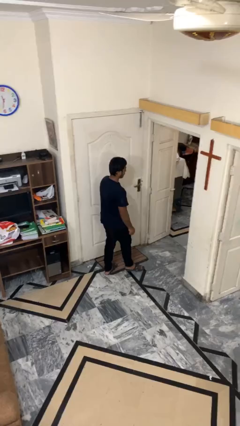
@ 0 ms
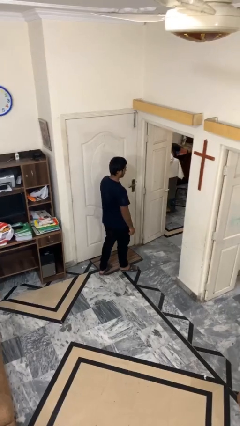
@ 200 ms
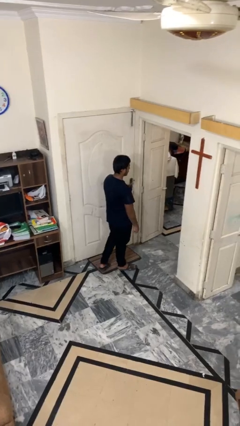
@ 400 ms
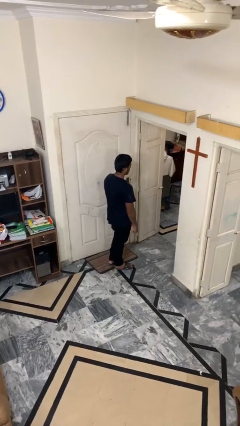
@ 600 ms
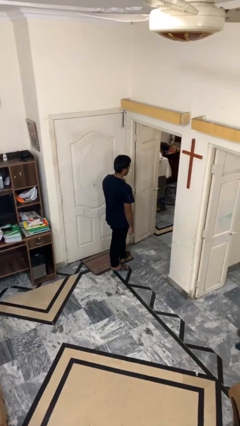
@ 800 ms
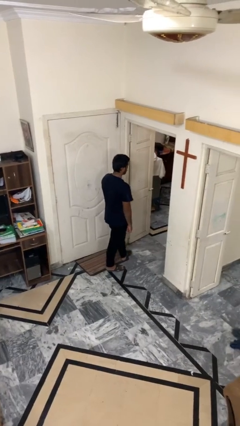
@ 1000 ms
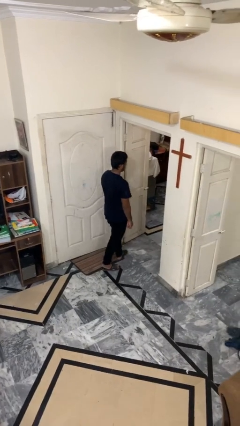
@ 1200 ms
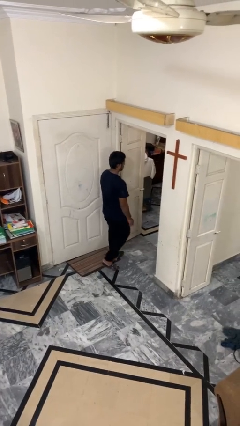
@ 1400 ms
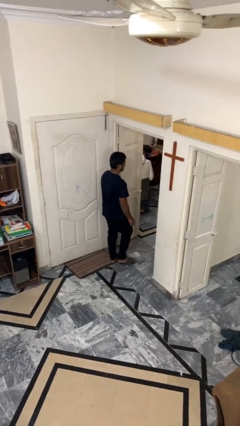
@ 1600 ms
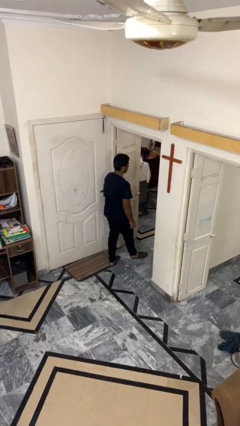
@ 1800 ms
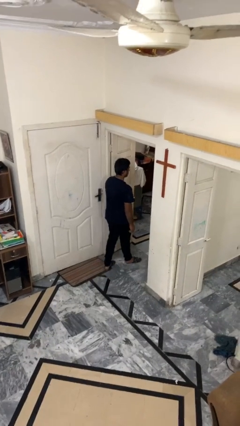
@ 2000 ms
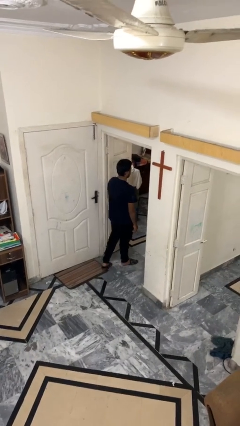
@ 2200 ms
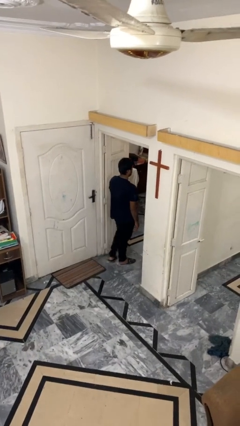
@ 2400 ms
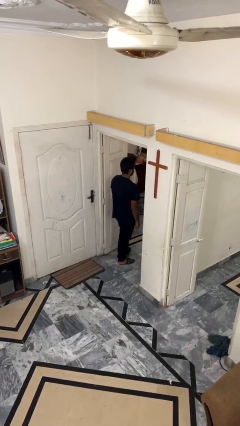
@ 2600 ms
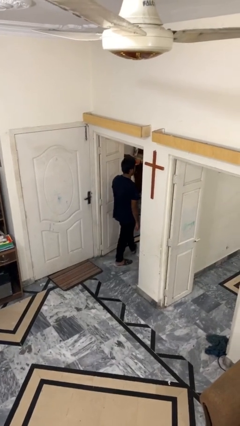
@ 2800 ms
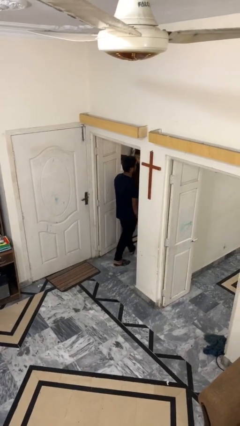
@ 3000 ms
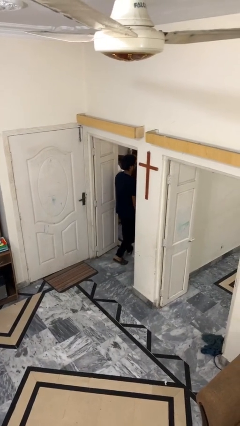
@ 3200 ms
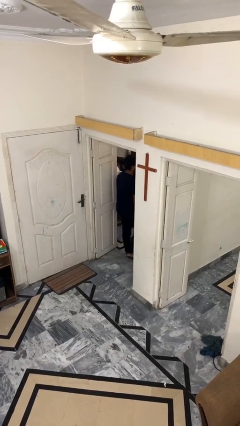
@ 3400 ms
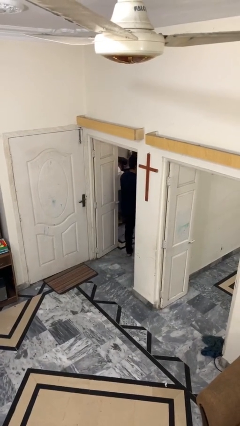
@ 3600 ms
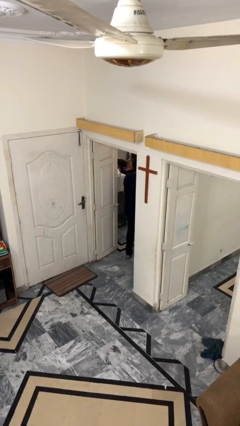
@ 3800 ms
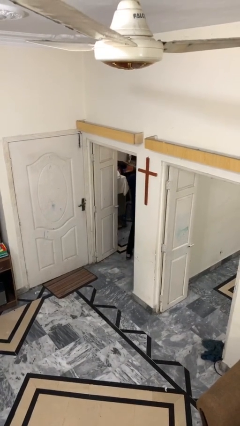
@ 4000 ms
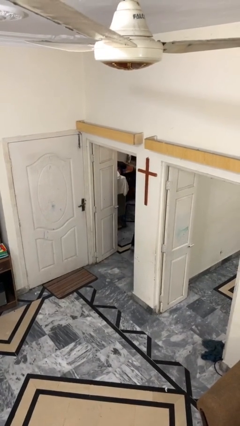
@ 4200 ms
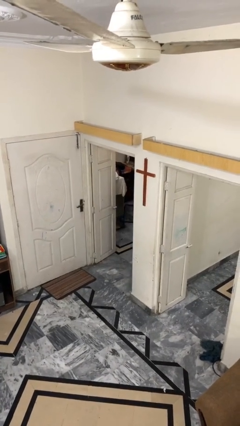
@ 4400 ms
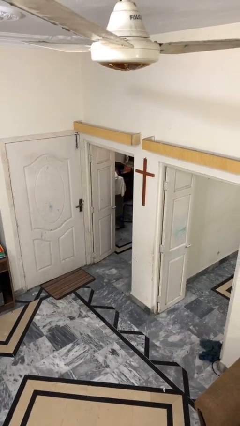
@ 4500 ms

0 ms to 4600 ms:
person exits scene through structure

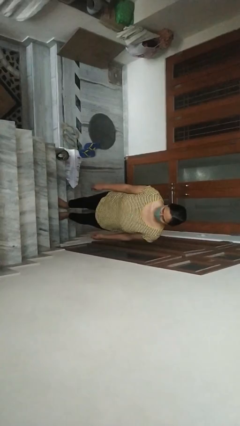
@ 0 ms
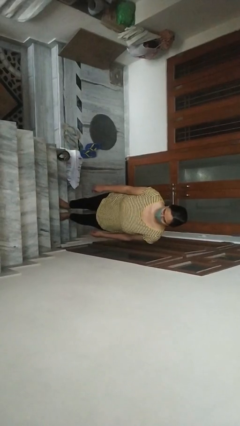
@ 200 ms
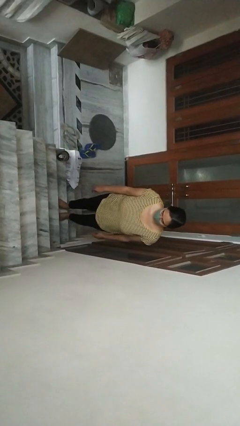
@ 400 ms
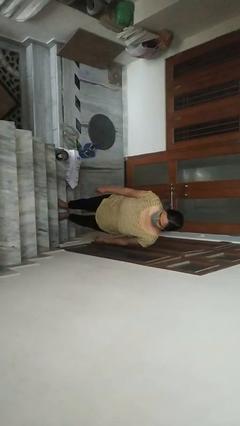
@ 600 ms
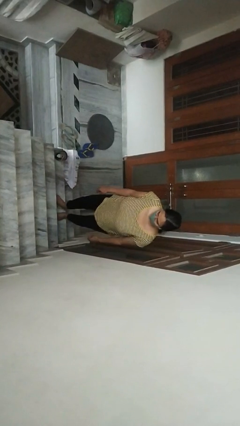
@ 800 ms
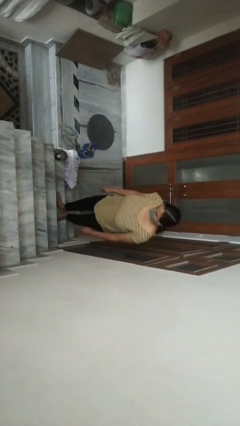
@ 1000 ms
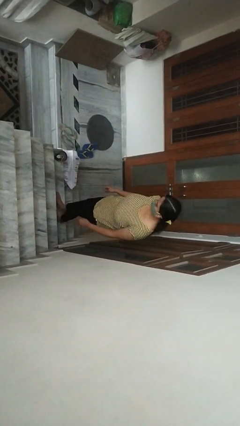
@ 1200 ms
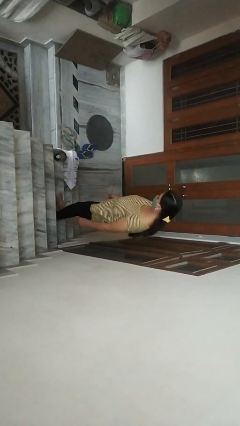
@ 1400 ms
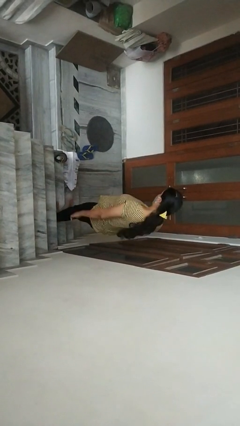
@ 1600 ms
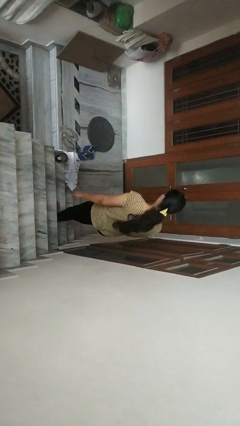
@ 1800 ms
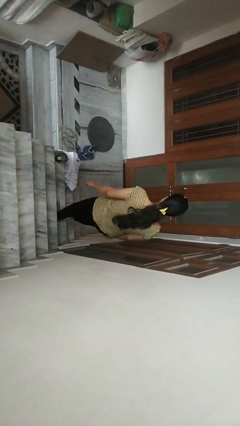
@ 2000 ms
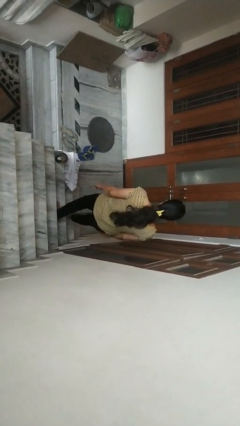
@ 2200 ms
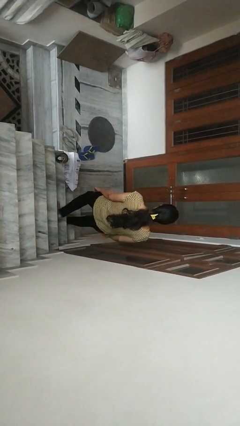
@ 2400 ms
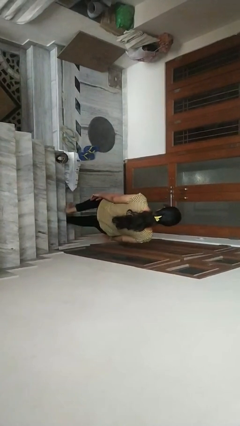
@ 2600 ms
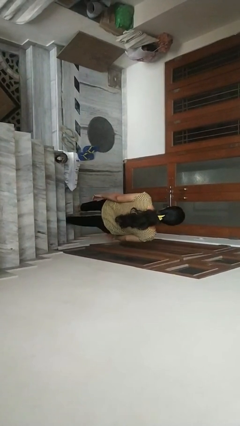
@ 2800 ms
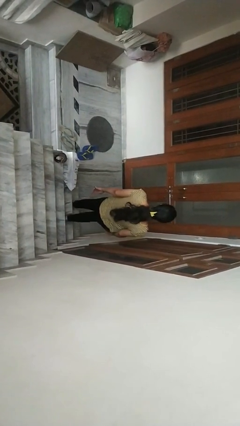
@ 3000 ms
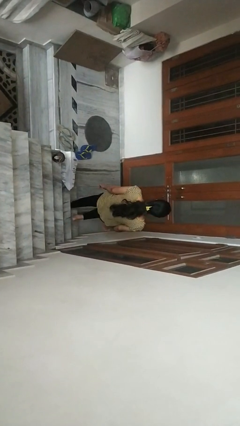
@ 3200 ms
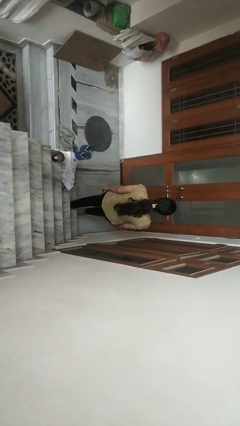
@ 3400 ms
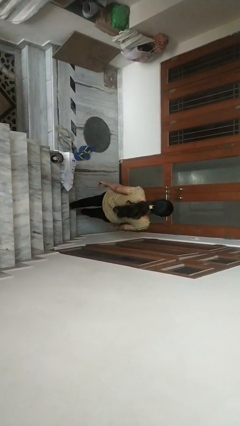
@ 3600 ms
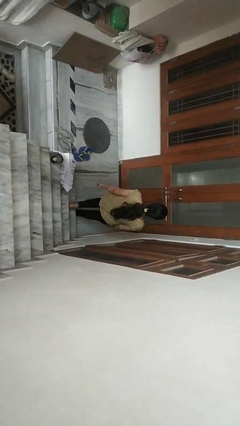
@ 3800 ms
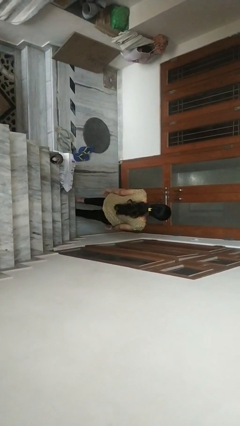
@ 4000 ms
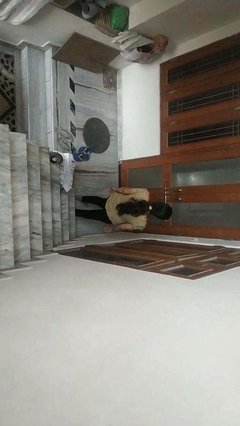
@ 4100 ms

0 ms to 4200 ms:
person climbs down stairs

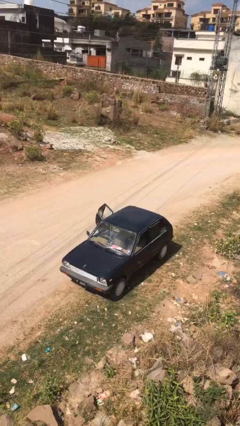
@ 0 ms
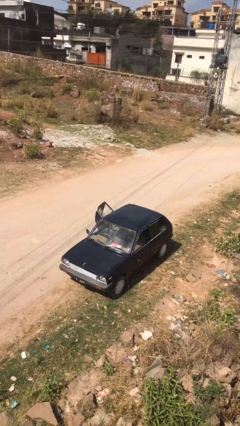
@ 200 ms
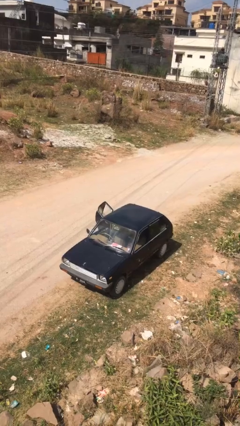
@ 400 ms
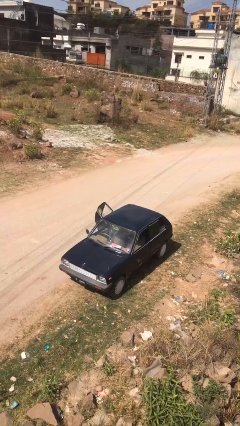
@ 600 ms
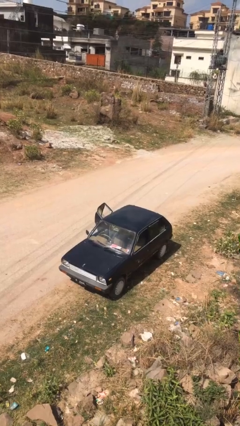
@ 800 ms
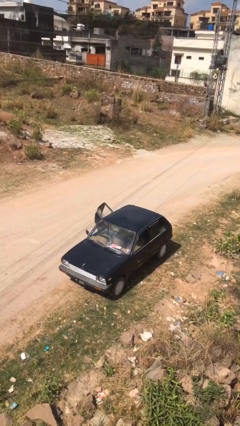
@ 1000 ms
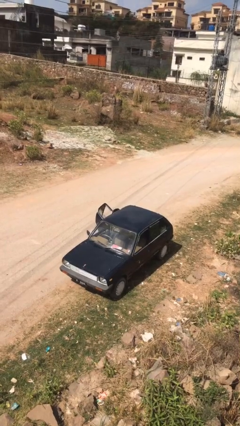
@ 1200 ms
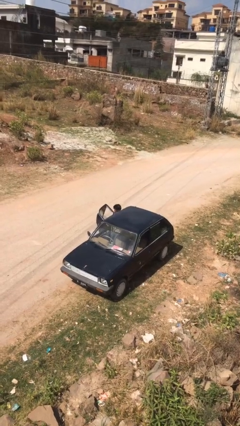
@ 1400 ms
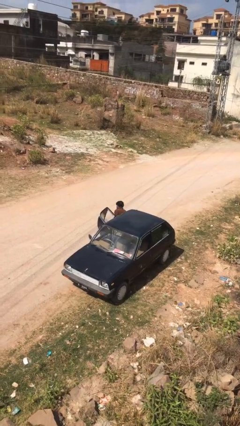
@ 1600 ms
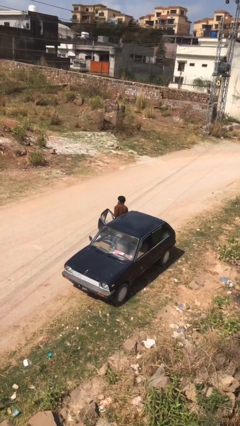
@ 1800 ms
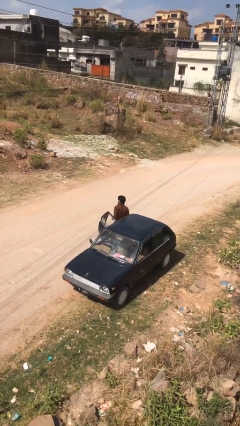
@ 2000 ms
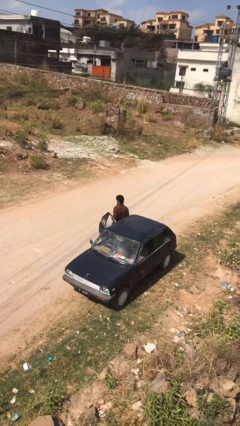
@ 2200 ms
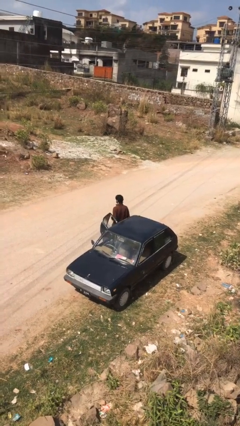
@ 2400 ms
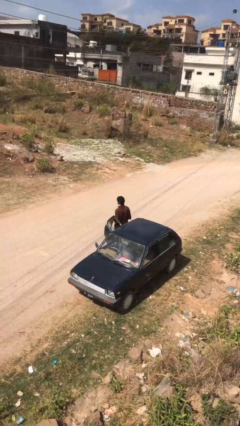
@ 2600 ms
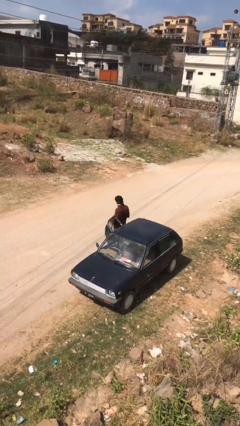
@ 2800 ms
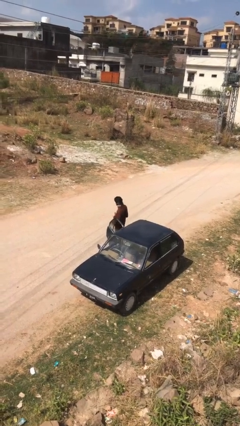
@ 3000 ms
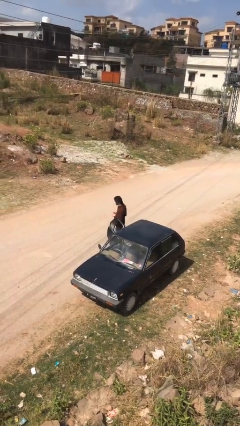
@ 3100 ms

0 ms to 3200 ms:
person exits car

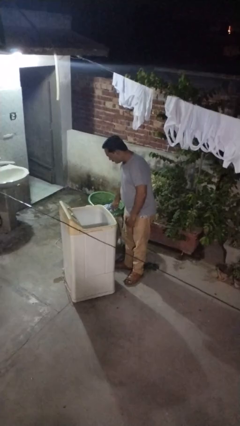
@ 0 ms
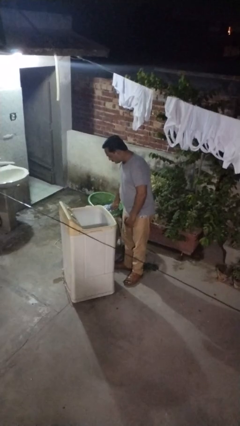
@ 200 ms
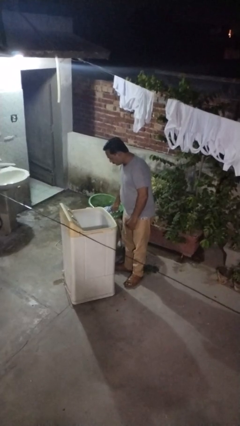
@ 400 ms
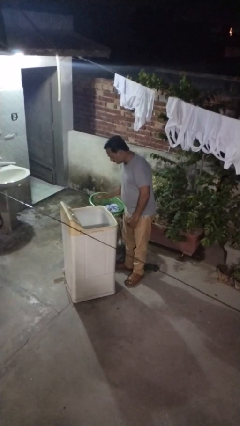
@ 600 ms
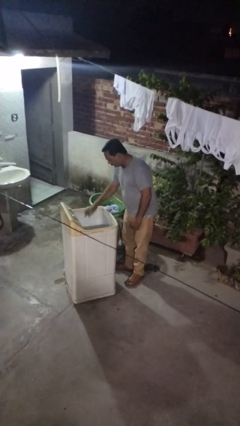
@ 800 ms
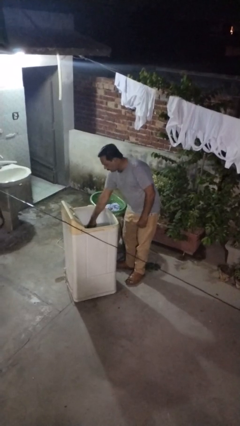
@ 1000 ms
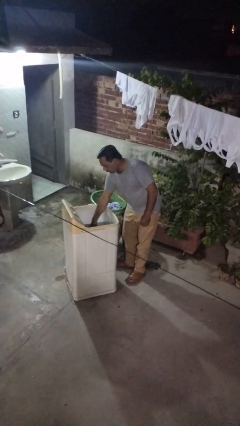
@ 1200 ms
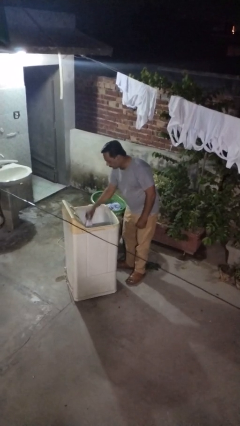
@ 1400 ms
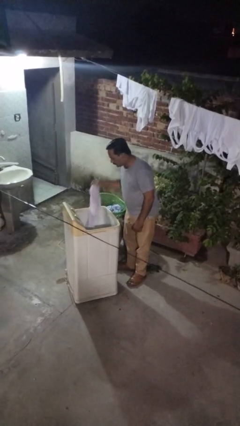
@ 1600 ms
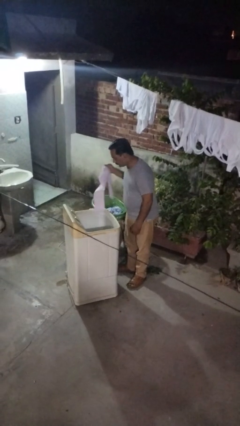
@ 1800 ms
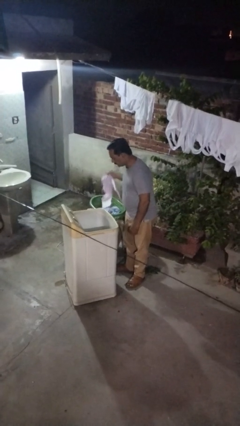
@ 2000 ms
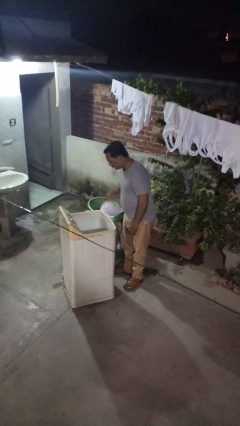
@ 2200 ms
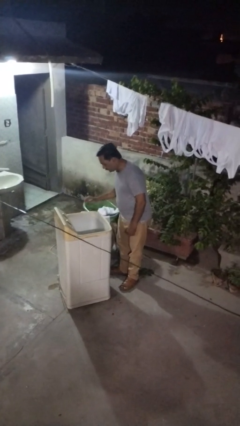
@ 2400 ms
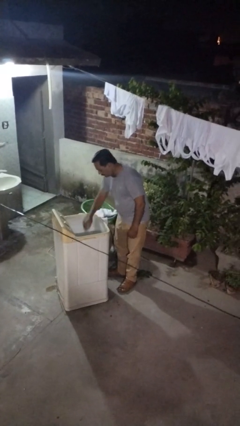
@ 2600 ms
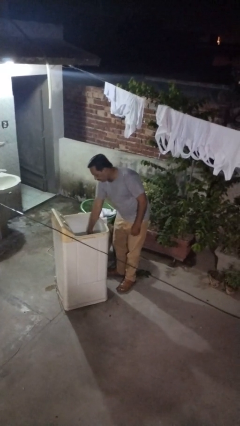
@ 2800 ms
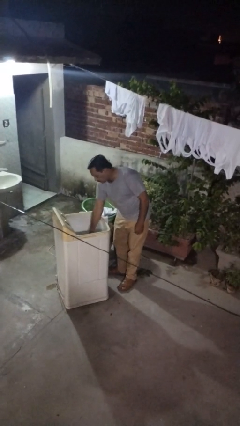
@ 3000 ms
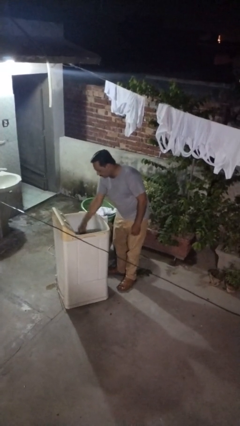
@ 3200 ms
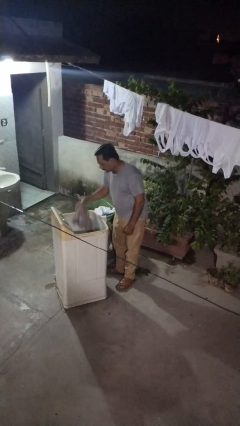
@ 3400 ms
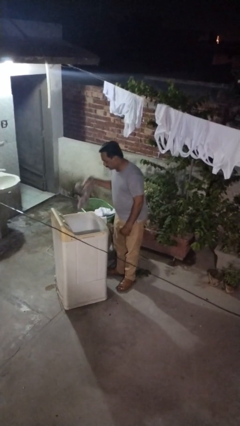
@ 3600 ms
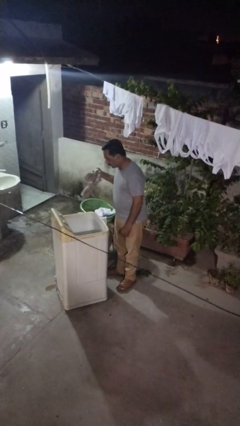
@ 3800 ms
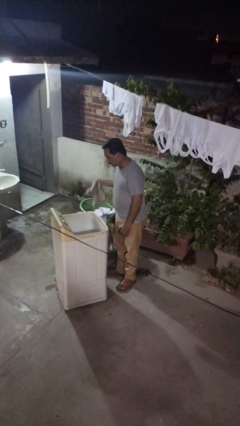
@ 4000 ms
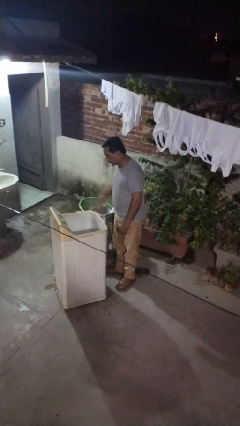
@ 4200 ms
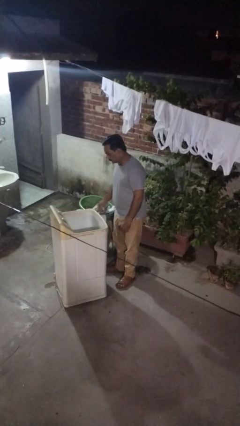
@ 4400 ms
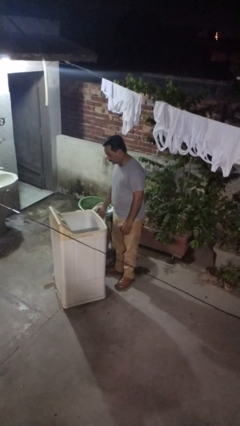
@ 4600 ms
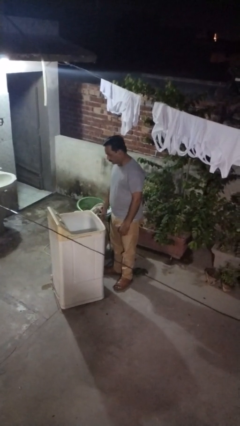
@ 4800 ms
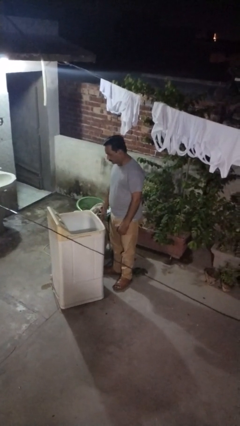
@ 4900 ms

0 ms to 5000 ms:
person loads clotheswasher

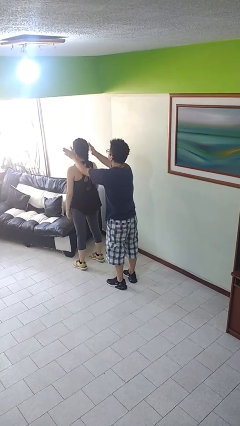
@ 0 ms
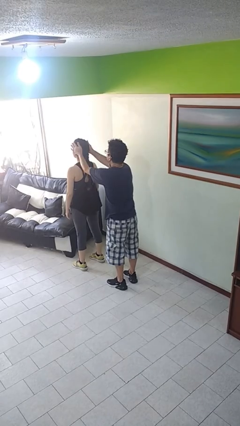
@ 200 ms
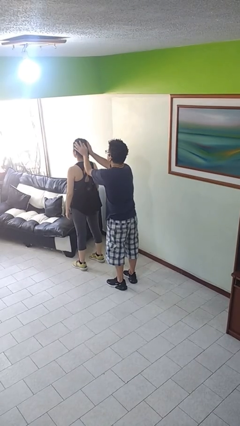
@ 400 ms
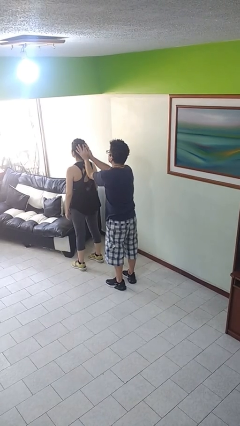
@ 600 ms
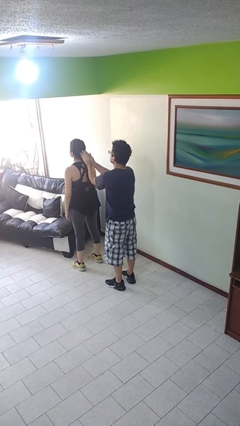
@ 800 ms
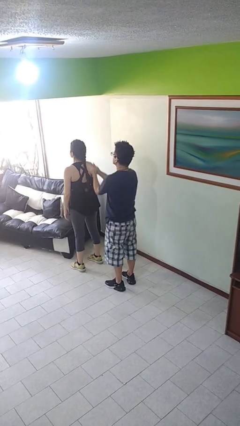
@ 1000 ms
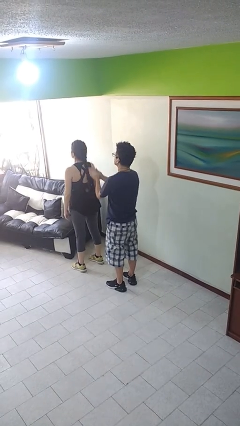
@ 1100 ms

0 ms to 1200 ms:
person grabs person by hair
